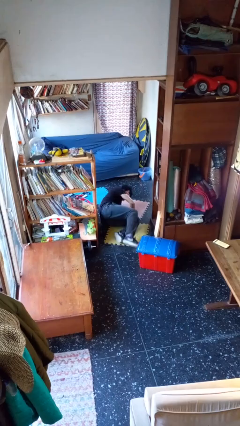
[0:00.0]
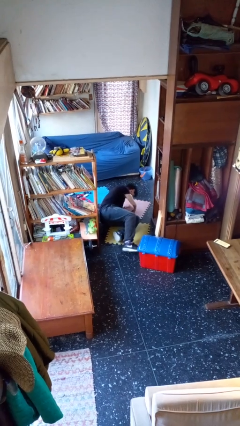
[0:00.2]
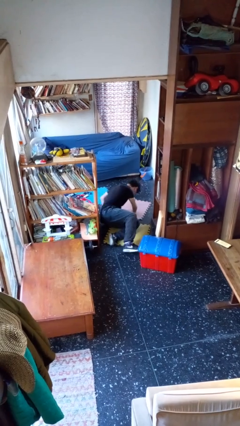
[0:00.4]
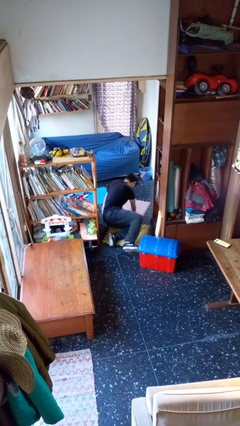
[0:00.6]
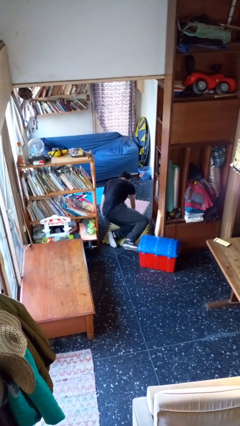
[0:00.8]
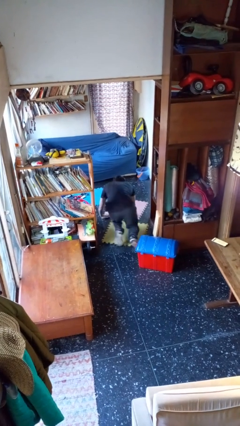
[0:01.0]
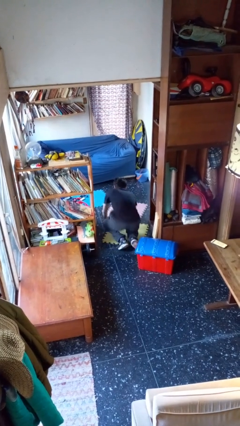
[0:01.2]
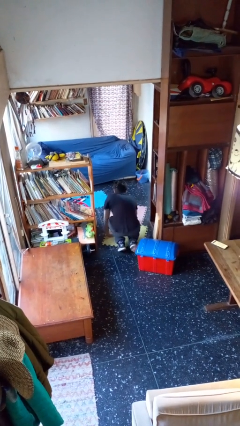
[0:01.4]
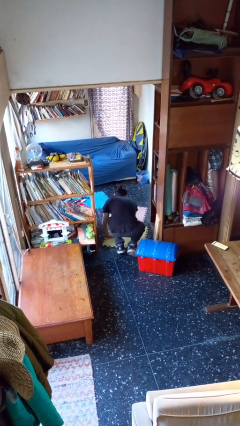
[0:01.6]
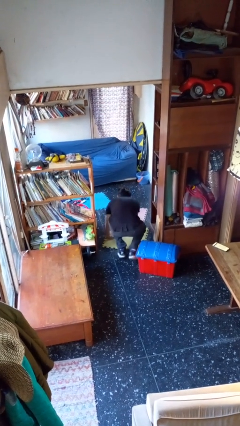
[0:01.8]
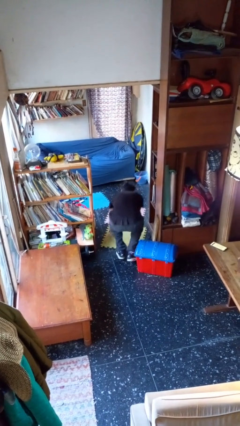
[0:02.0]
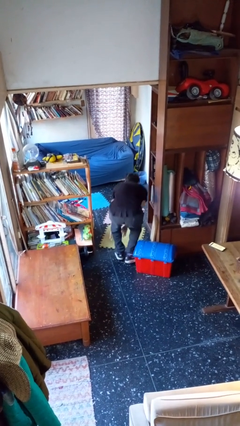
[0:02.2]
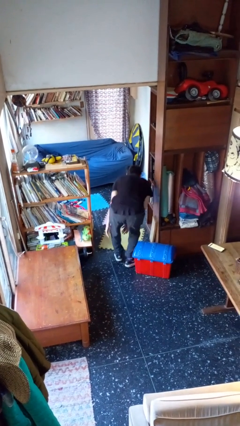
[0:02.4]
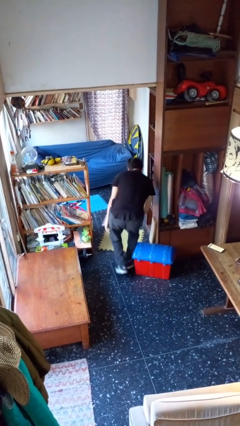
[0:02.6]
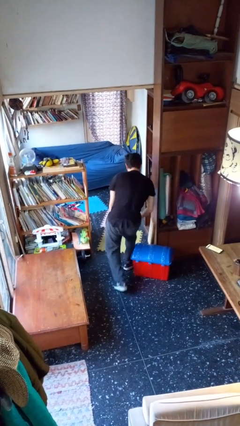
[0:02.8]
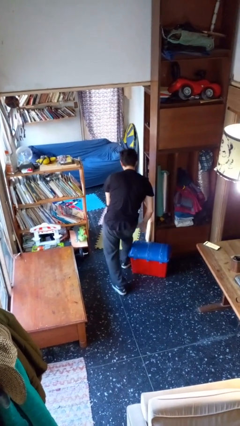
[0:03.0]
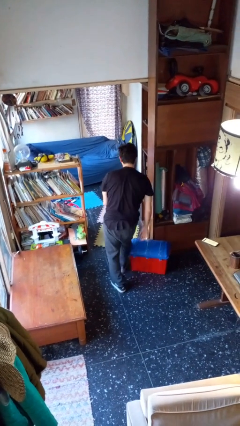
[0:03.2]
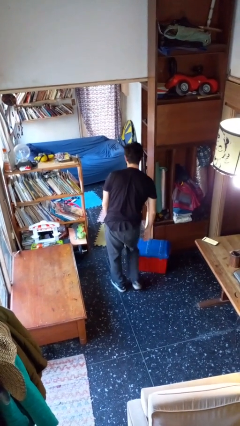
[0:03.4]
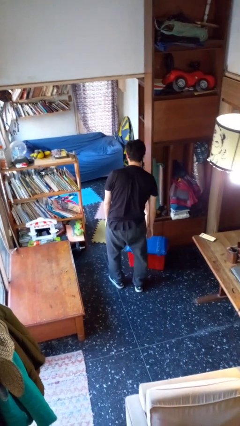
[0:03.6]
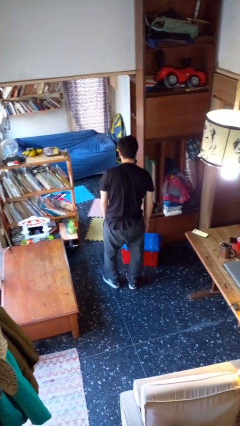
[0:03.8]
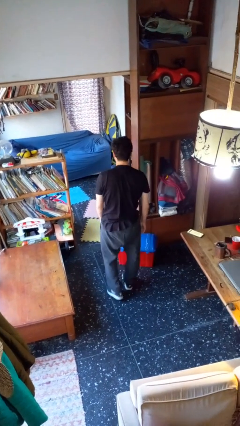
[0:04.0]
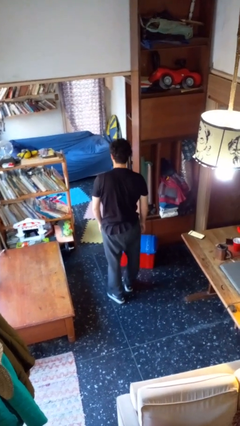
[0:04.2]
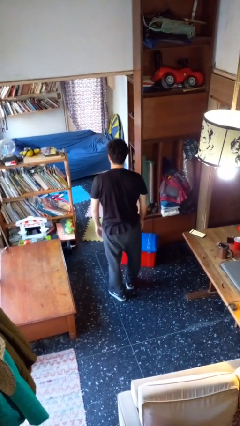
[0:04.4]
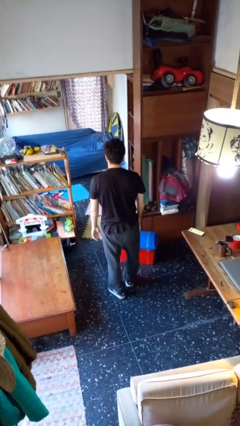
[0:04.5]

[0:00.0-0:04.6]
person stands up from floor

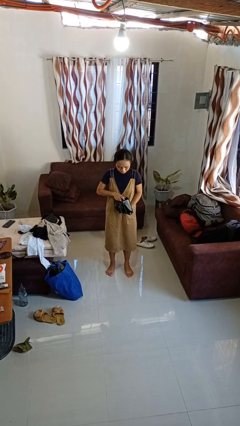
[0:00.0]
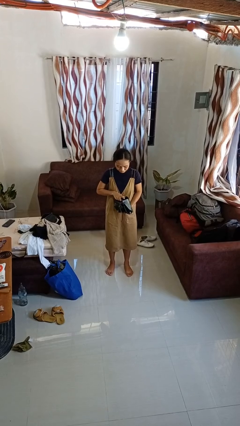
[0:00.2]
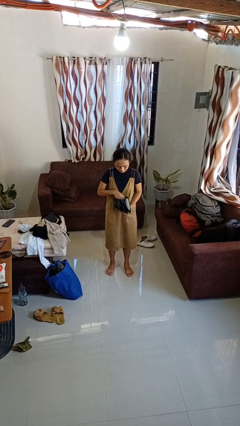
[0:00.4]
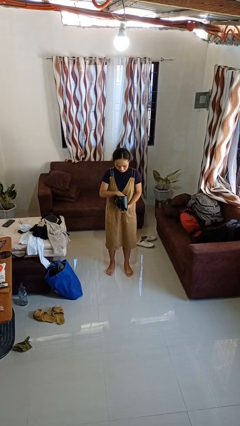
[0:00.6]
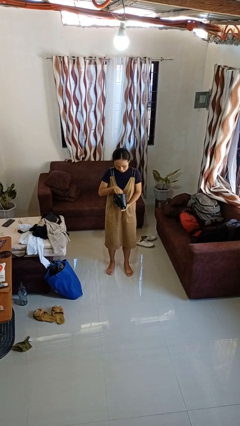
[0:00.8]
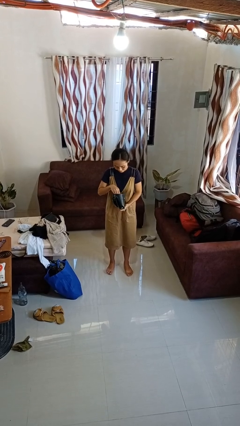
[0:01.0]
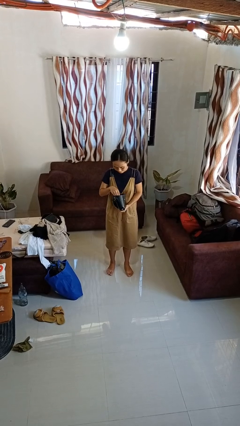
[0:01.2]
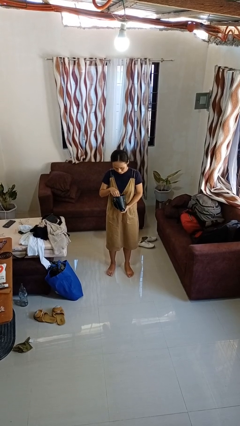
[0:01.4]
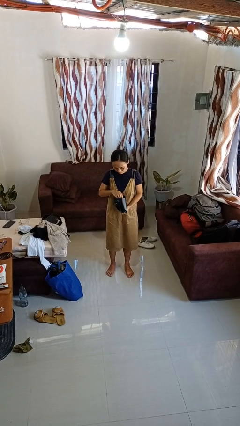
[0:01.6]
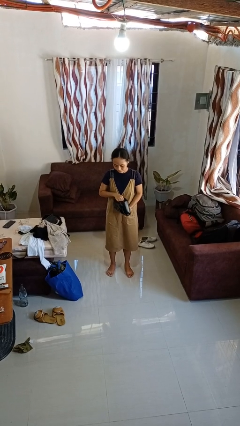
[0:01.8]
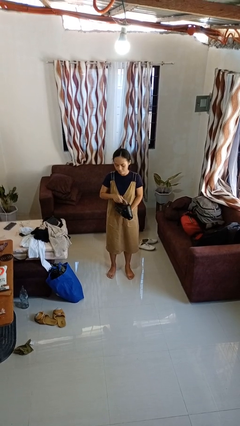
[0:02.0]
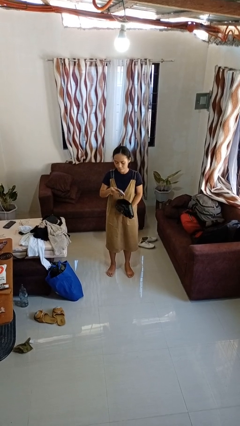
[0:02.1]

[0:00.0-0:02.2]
person searches in purse

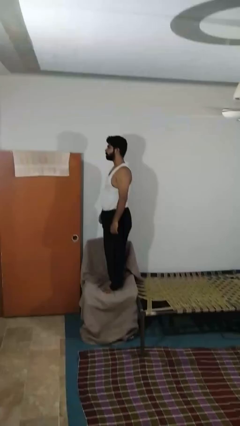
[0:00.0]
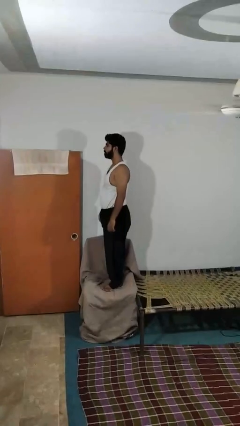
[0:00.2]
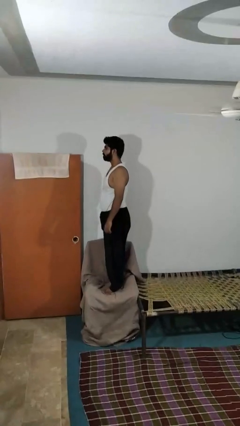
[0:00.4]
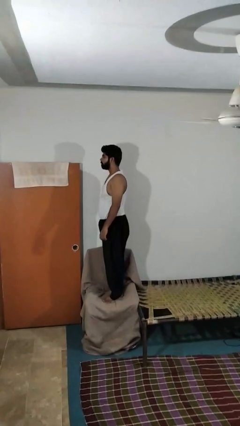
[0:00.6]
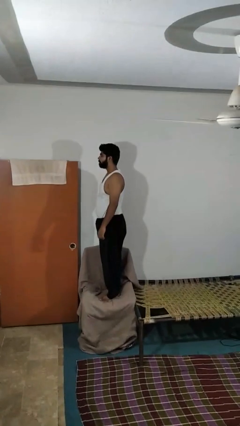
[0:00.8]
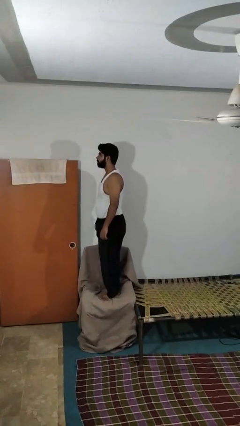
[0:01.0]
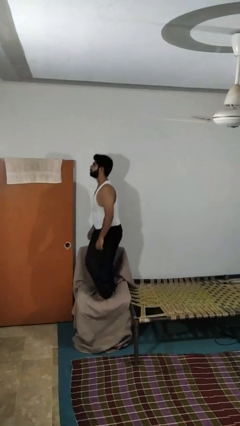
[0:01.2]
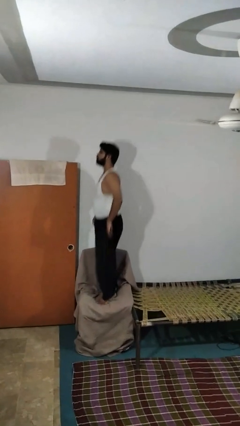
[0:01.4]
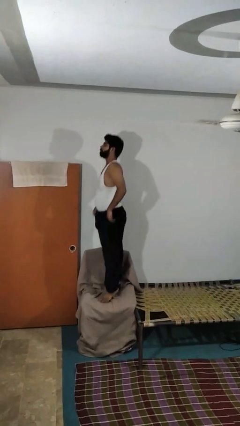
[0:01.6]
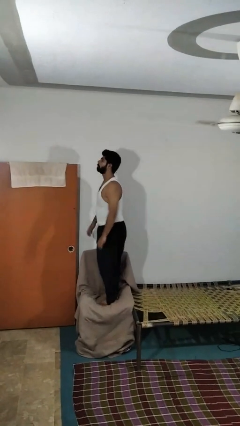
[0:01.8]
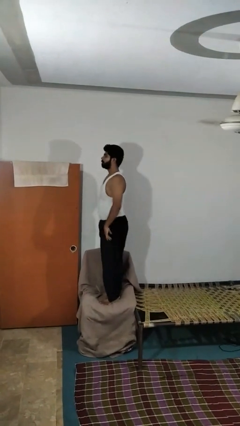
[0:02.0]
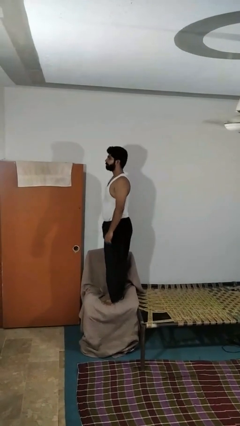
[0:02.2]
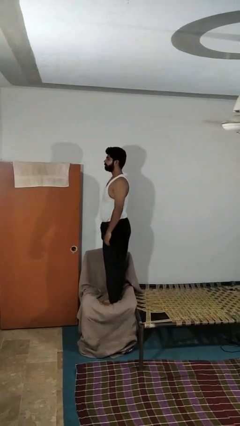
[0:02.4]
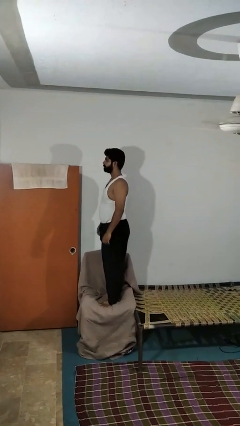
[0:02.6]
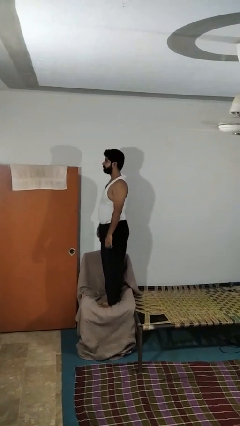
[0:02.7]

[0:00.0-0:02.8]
person jumps on couch

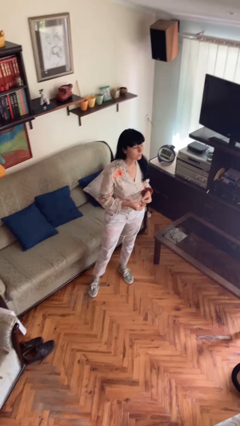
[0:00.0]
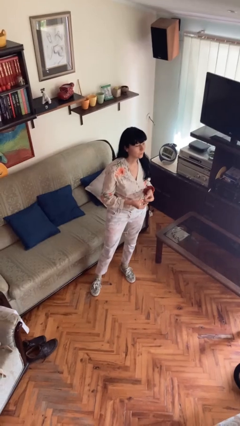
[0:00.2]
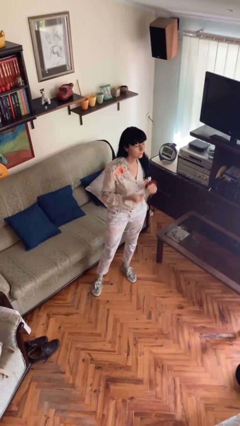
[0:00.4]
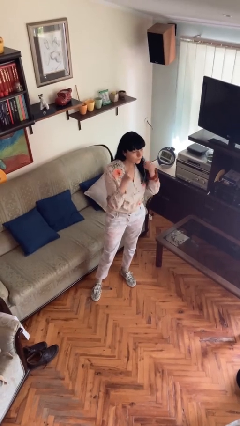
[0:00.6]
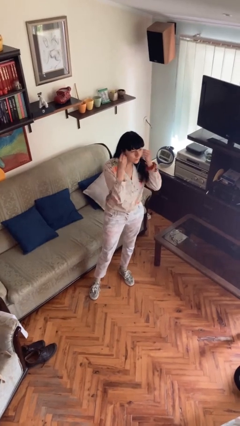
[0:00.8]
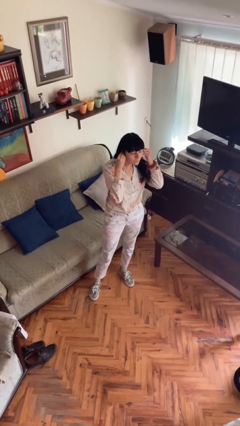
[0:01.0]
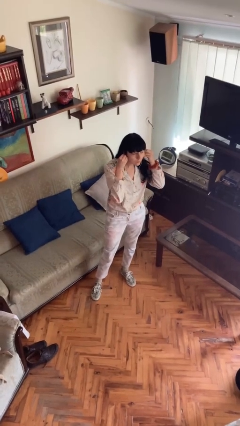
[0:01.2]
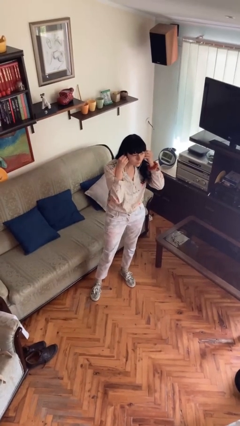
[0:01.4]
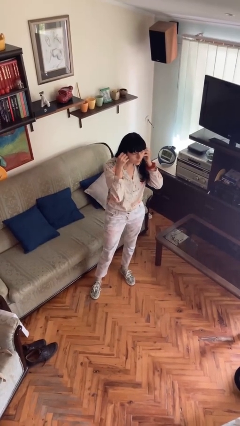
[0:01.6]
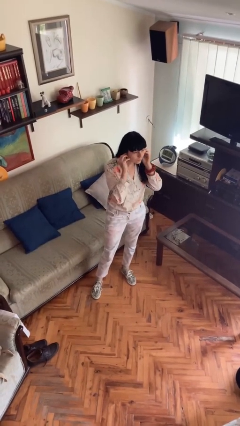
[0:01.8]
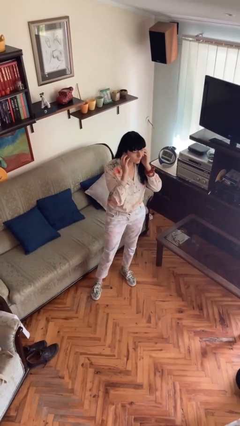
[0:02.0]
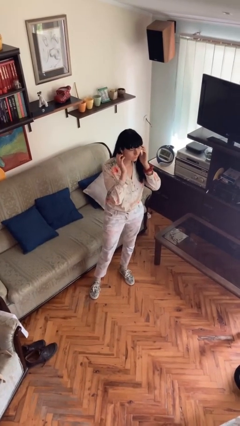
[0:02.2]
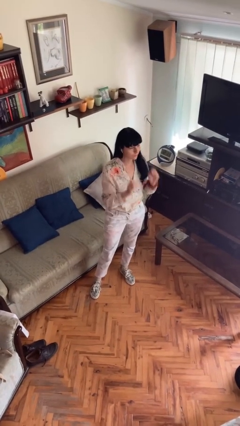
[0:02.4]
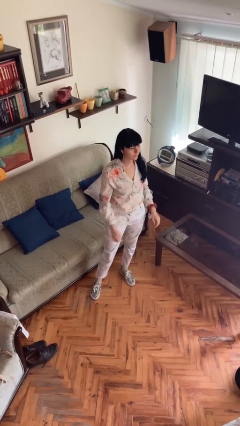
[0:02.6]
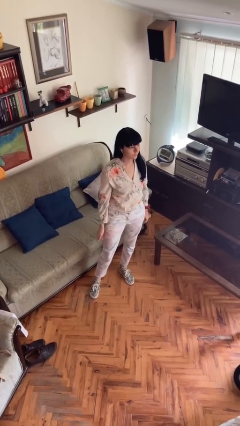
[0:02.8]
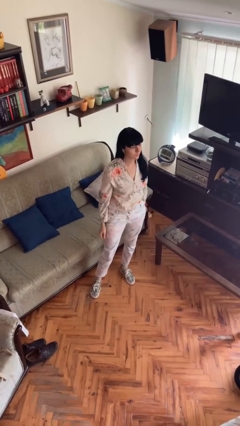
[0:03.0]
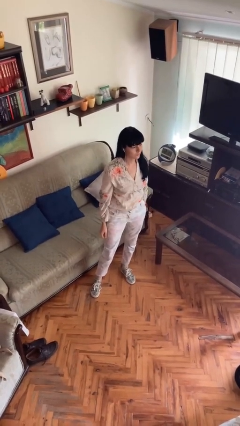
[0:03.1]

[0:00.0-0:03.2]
person puts on headphones

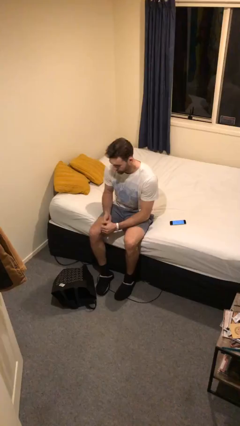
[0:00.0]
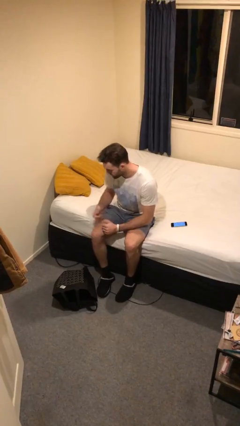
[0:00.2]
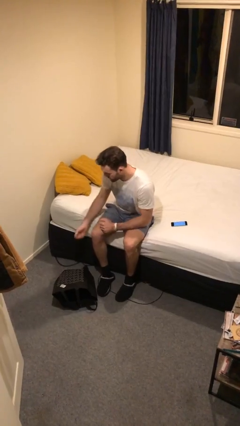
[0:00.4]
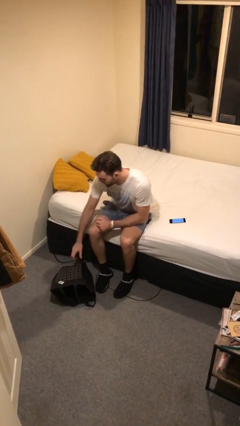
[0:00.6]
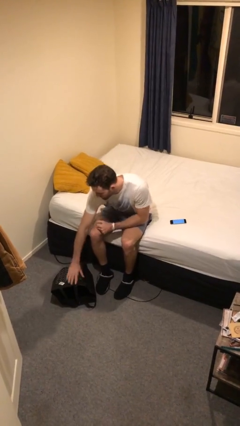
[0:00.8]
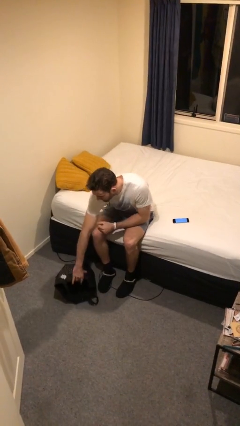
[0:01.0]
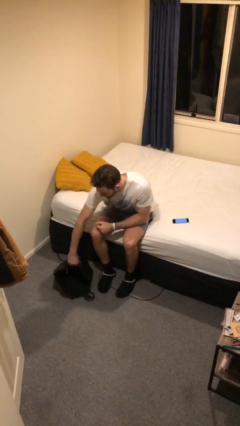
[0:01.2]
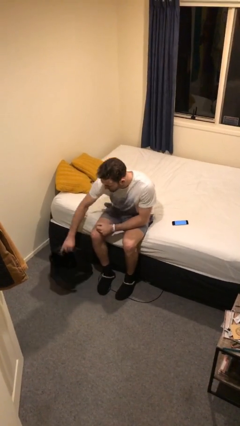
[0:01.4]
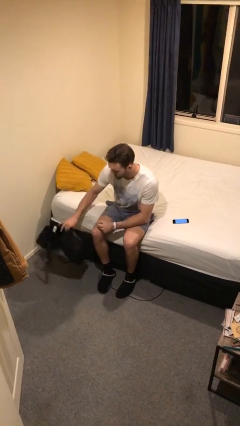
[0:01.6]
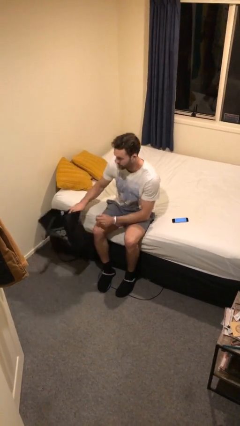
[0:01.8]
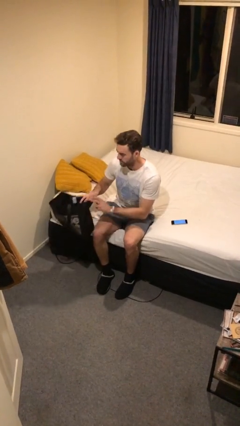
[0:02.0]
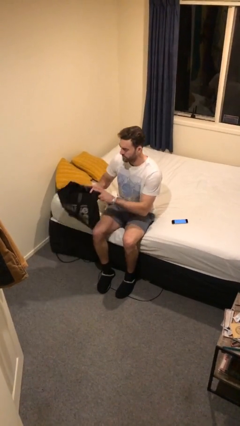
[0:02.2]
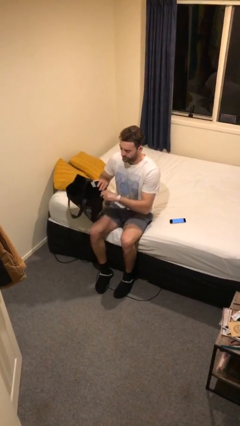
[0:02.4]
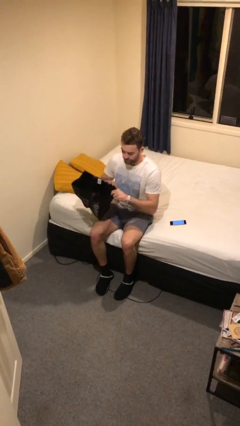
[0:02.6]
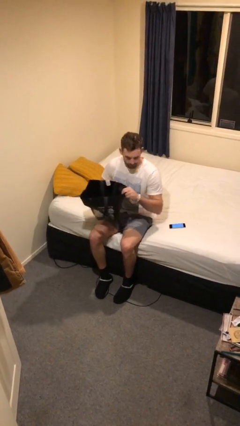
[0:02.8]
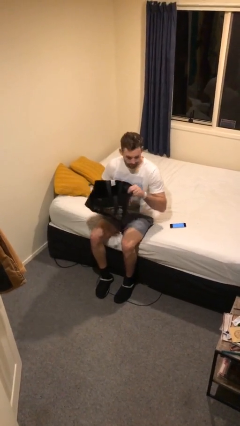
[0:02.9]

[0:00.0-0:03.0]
person picks up object from floor

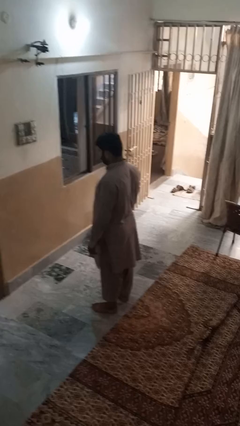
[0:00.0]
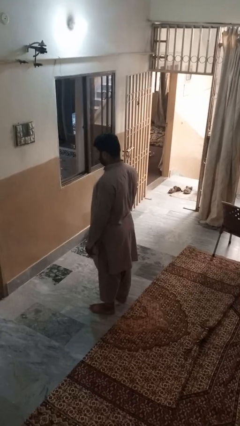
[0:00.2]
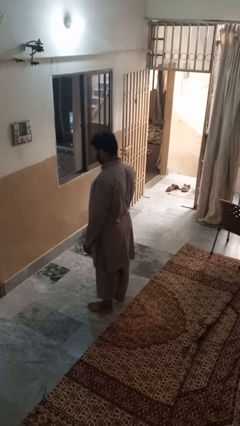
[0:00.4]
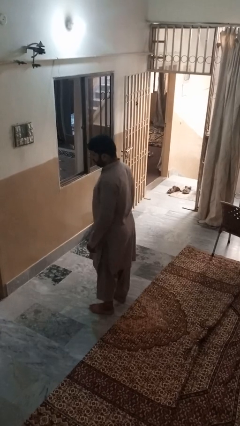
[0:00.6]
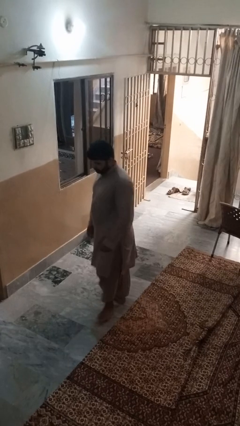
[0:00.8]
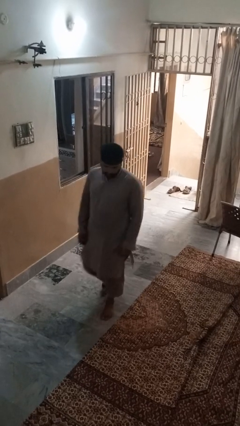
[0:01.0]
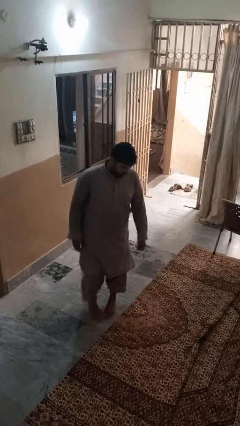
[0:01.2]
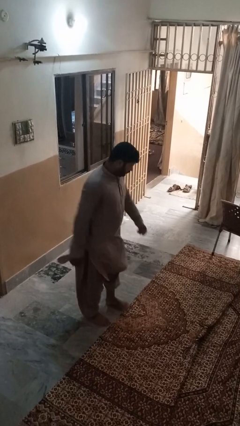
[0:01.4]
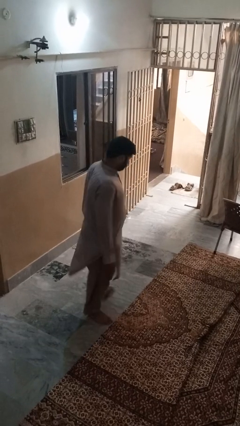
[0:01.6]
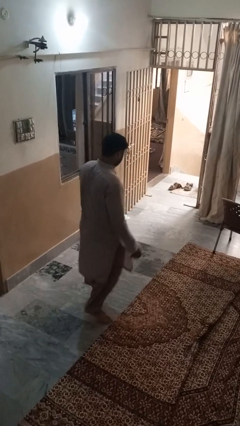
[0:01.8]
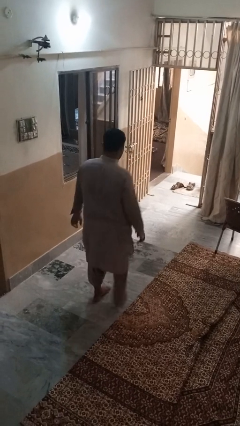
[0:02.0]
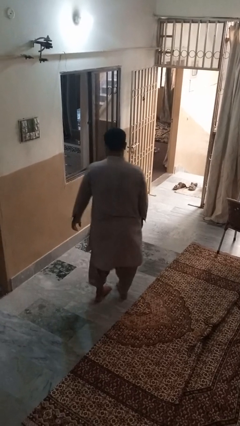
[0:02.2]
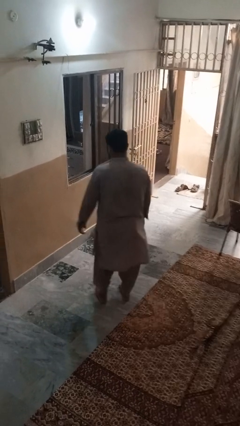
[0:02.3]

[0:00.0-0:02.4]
person twirls
